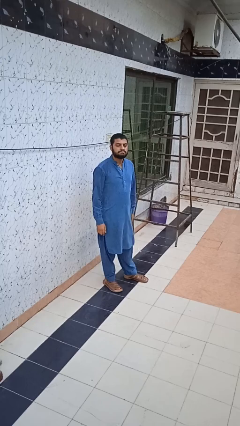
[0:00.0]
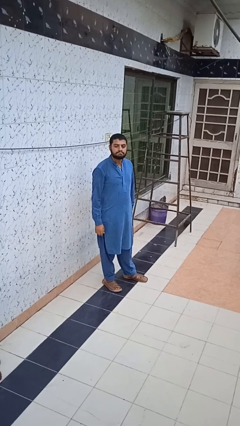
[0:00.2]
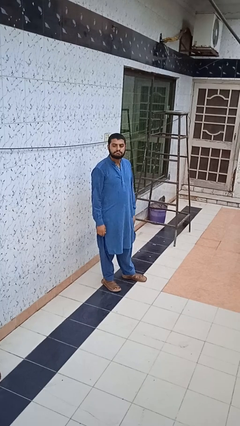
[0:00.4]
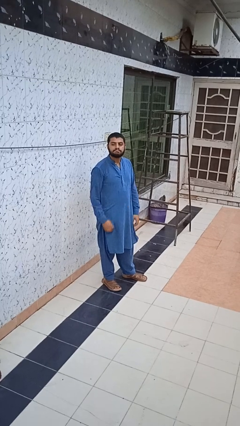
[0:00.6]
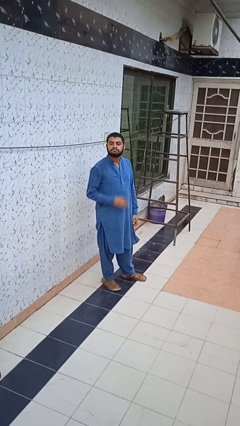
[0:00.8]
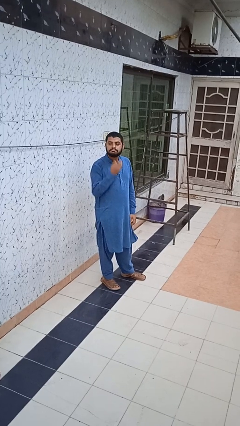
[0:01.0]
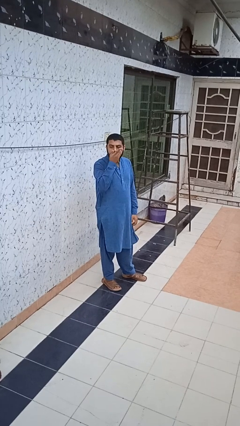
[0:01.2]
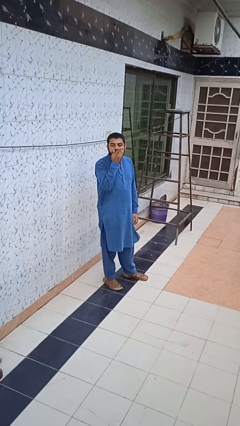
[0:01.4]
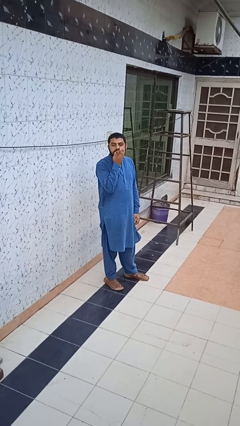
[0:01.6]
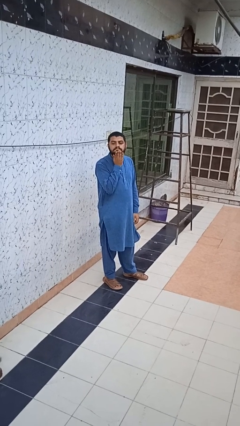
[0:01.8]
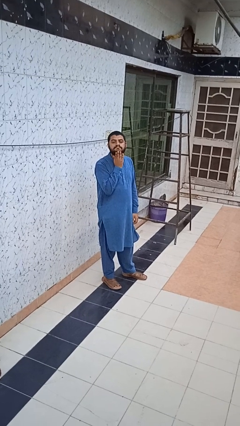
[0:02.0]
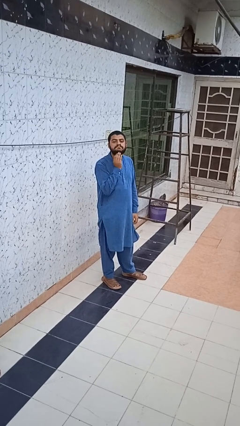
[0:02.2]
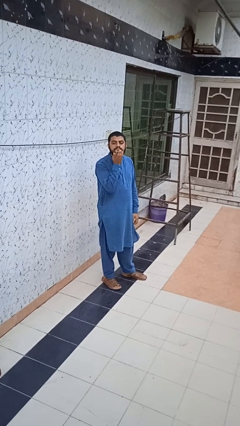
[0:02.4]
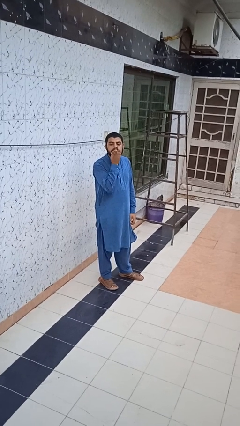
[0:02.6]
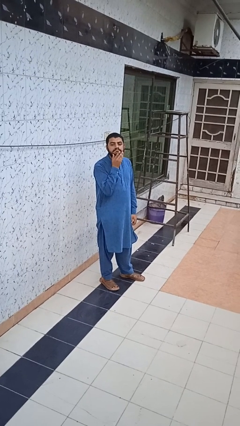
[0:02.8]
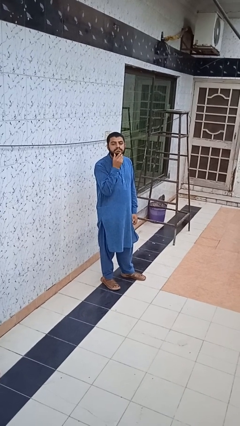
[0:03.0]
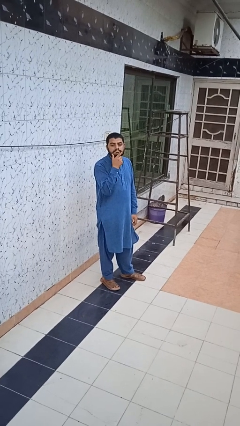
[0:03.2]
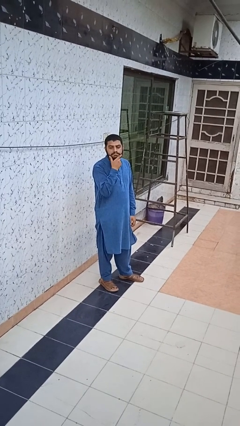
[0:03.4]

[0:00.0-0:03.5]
person strokes chin

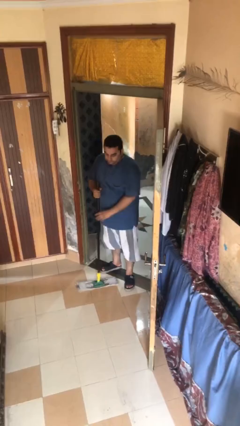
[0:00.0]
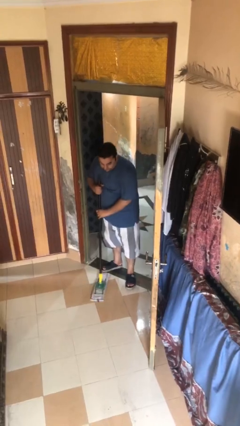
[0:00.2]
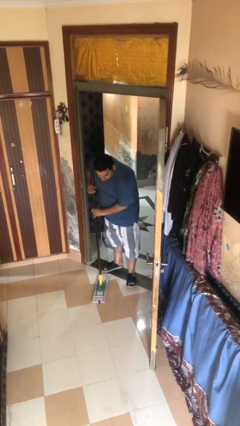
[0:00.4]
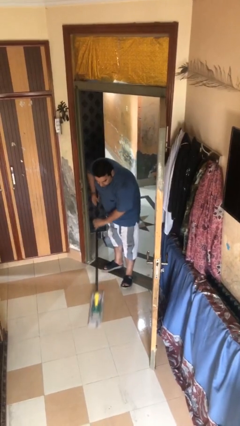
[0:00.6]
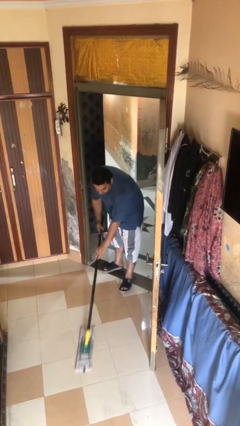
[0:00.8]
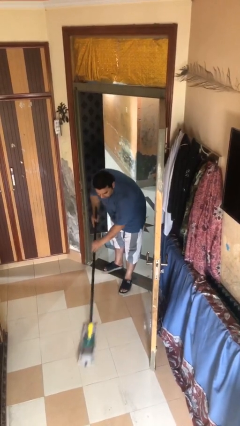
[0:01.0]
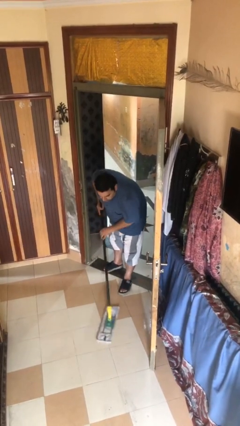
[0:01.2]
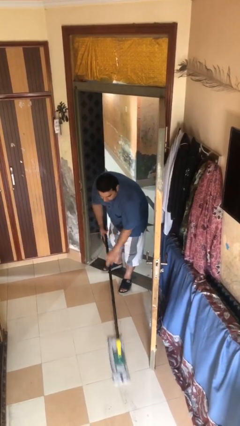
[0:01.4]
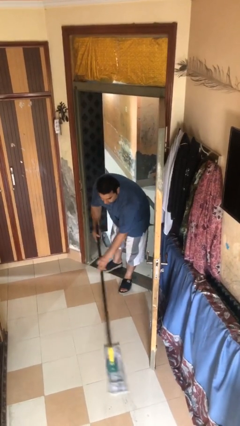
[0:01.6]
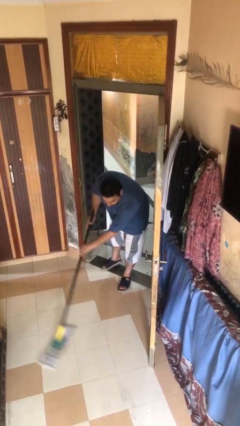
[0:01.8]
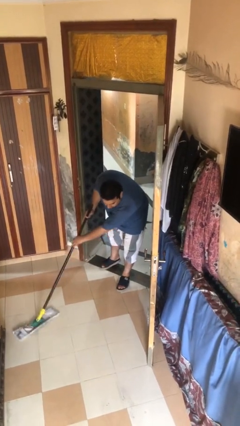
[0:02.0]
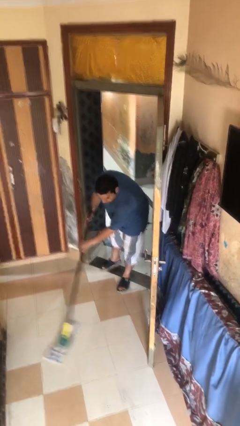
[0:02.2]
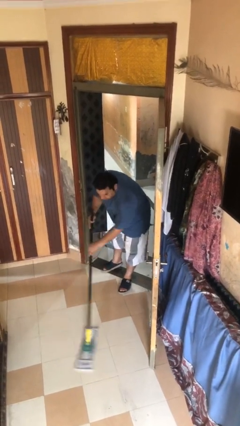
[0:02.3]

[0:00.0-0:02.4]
person mops

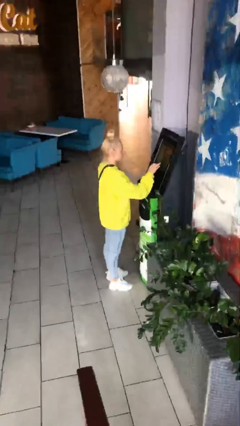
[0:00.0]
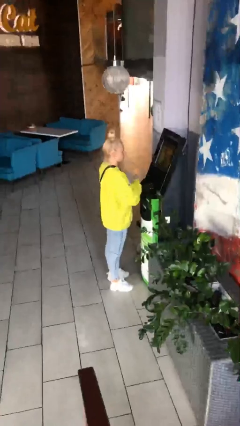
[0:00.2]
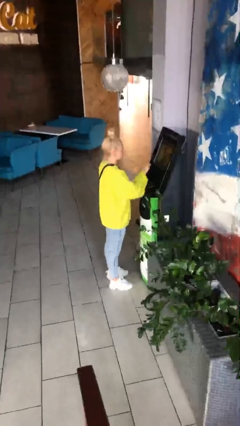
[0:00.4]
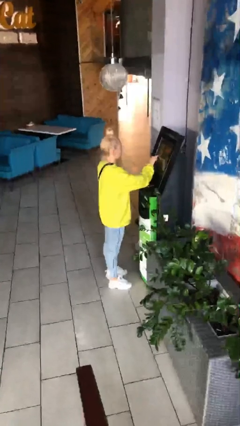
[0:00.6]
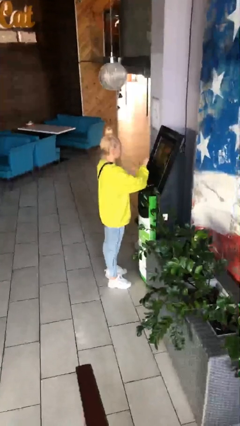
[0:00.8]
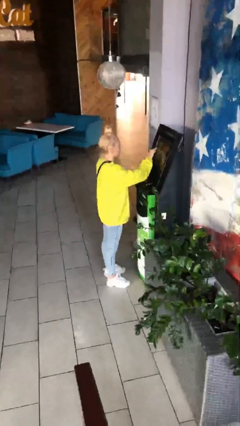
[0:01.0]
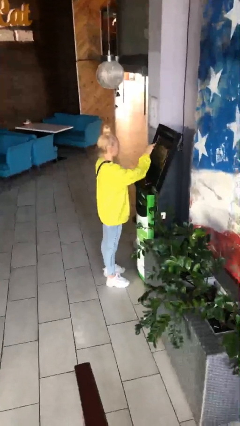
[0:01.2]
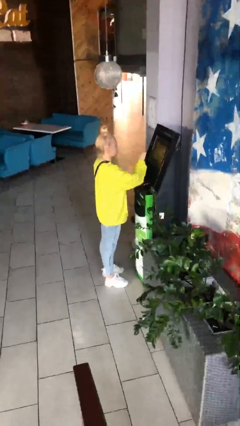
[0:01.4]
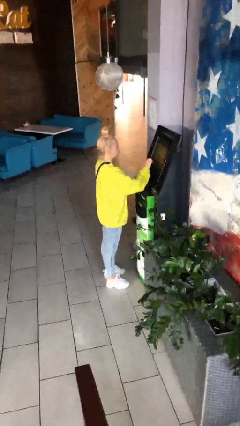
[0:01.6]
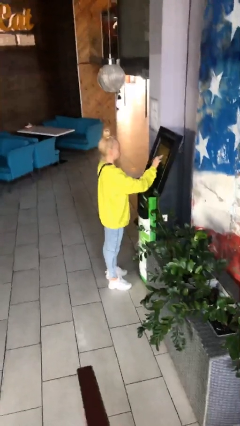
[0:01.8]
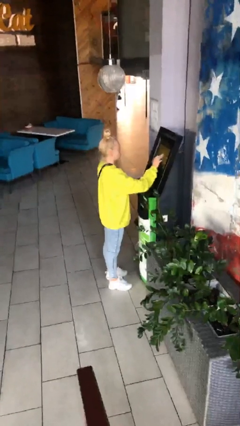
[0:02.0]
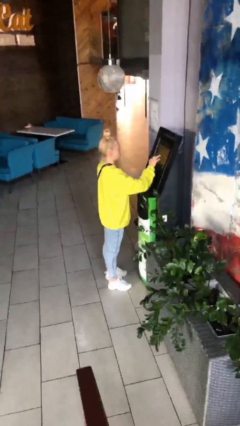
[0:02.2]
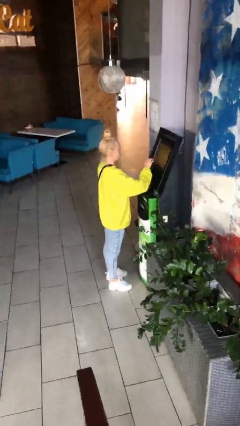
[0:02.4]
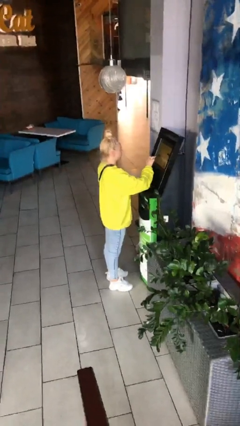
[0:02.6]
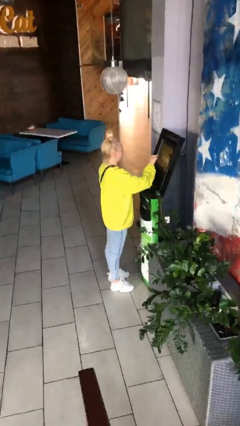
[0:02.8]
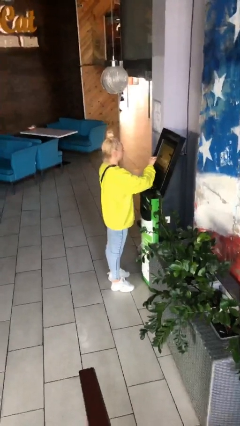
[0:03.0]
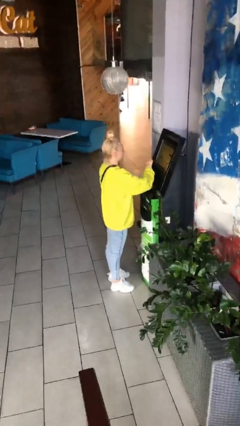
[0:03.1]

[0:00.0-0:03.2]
person purchases from machine

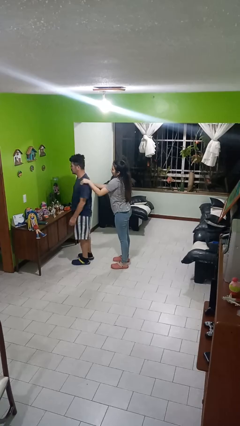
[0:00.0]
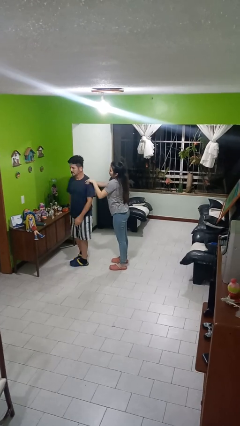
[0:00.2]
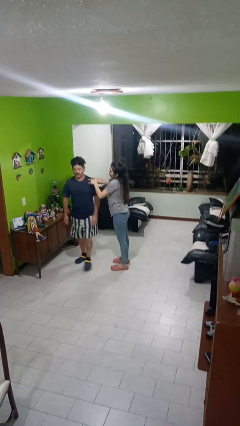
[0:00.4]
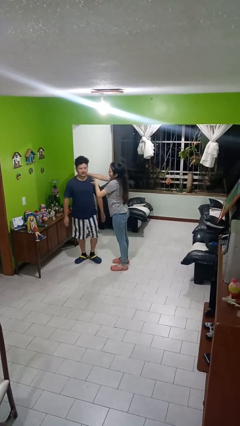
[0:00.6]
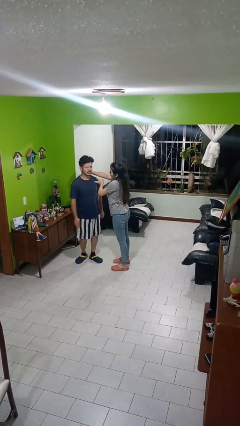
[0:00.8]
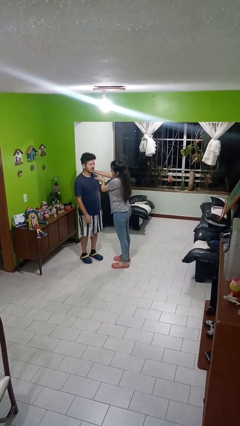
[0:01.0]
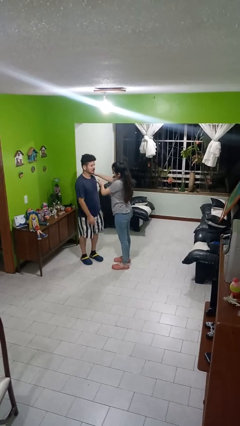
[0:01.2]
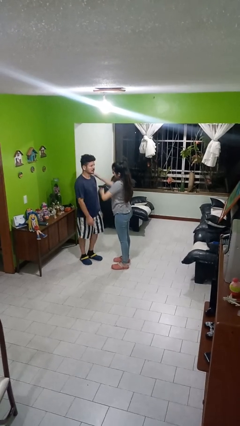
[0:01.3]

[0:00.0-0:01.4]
person spins person around

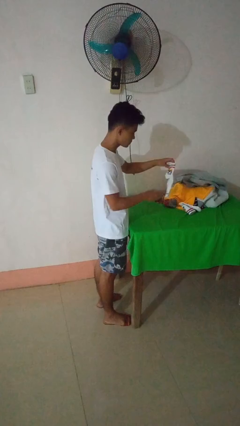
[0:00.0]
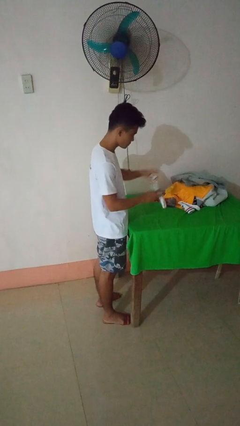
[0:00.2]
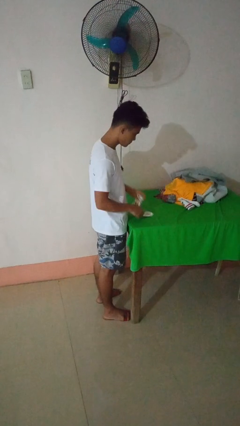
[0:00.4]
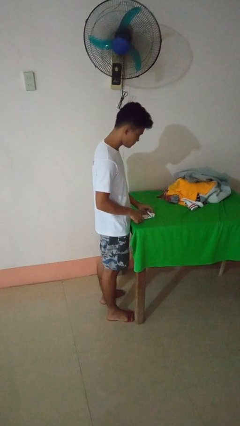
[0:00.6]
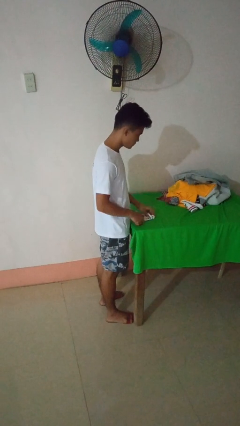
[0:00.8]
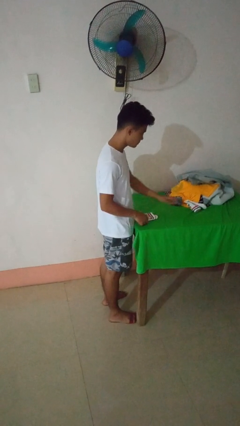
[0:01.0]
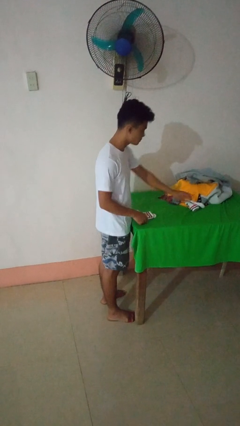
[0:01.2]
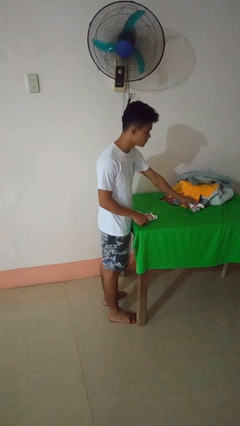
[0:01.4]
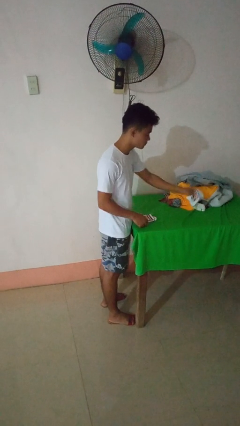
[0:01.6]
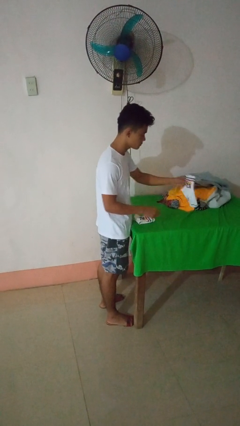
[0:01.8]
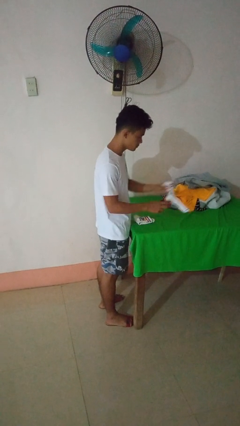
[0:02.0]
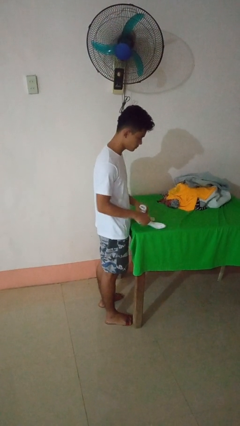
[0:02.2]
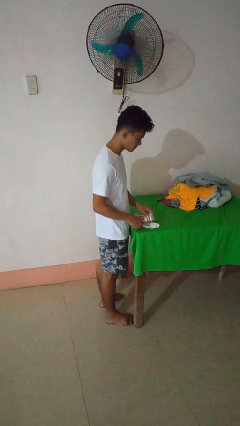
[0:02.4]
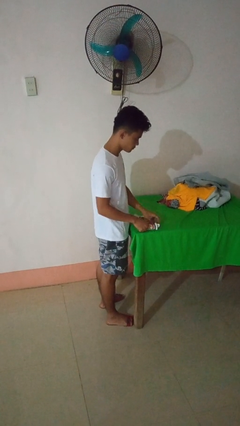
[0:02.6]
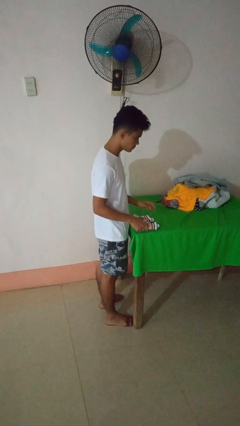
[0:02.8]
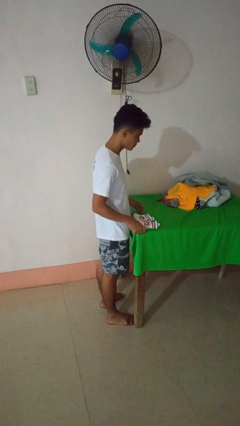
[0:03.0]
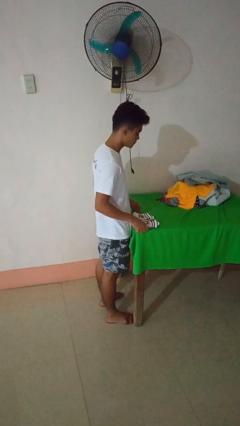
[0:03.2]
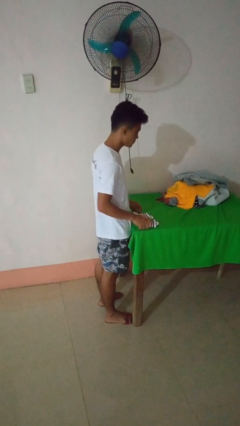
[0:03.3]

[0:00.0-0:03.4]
person folds socks

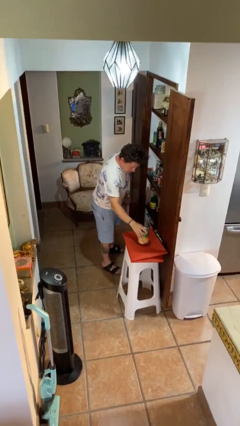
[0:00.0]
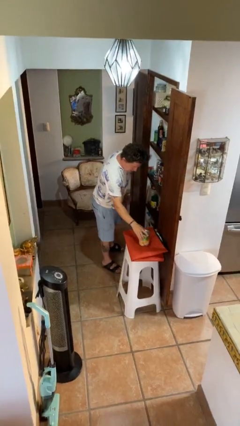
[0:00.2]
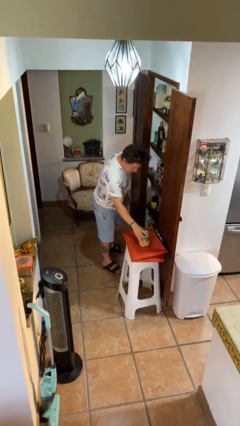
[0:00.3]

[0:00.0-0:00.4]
person puts down object on table

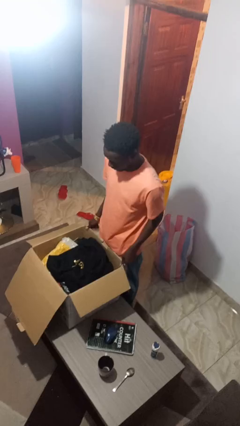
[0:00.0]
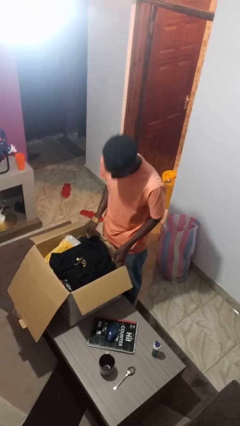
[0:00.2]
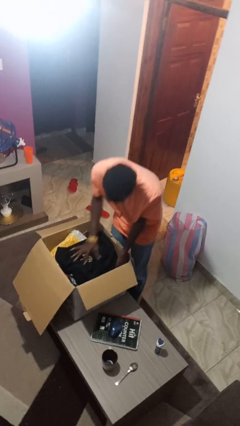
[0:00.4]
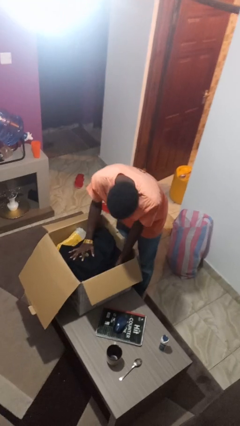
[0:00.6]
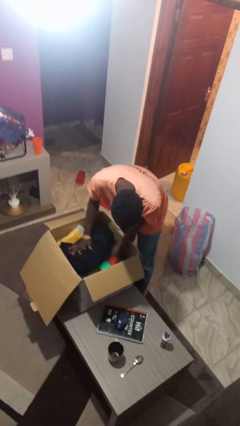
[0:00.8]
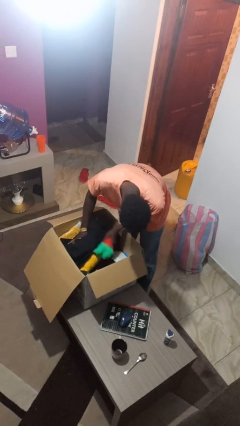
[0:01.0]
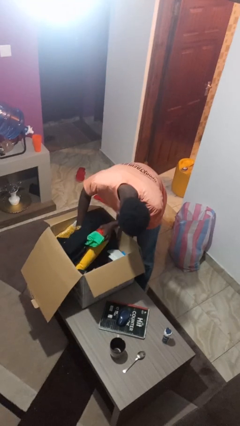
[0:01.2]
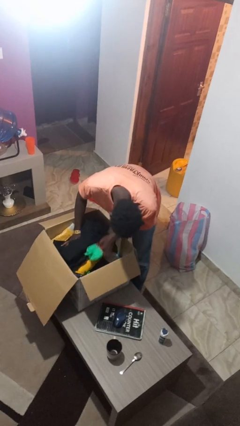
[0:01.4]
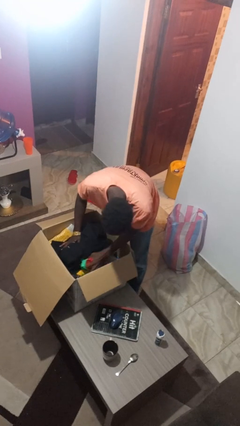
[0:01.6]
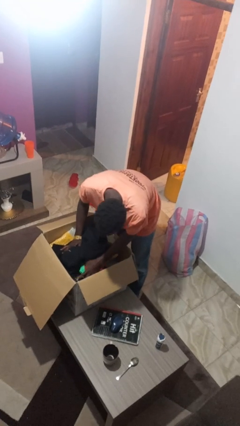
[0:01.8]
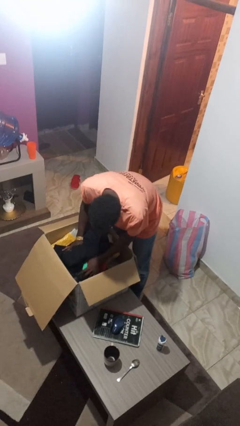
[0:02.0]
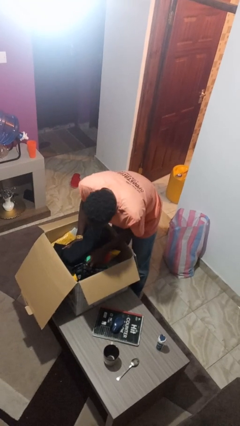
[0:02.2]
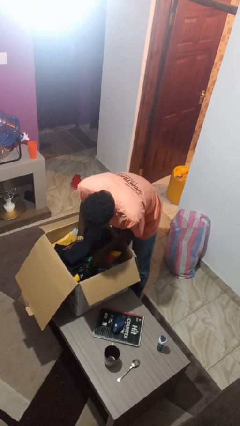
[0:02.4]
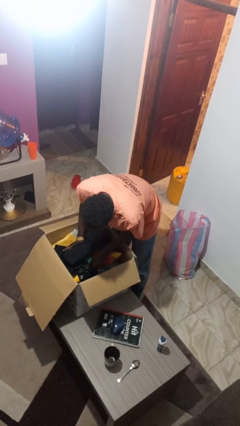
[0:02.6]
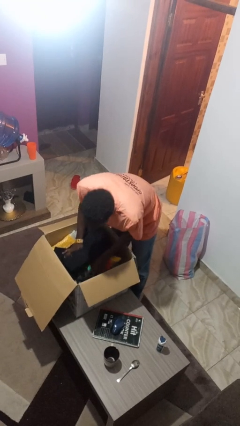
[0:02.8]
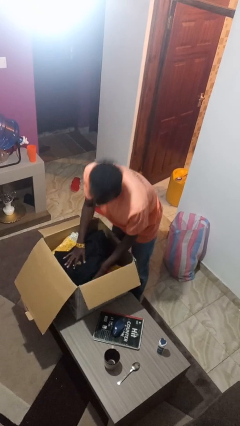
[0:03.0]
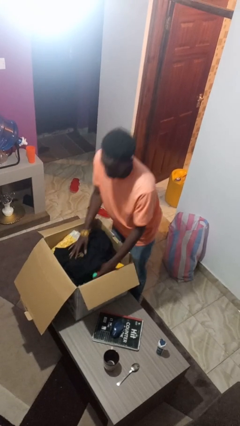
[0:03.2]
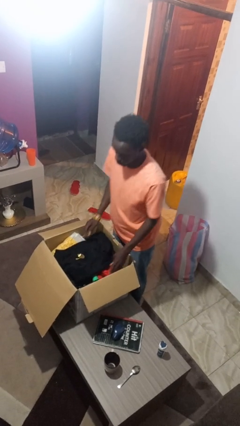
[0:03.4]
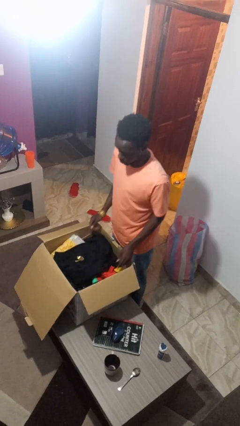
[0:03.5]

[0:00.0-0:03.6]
person searches in box
